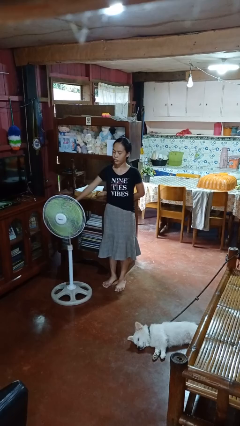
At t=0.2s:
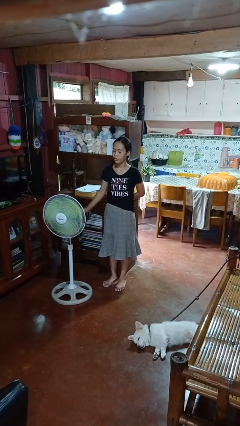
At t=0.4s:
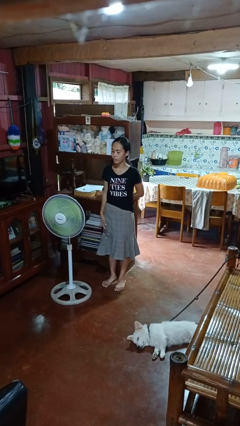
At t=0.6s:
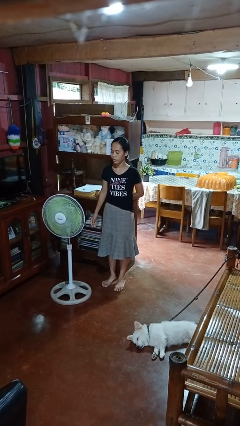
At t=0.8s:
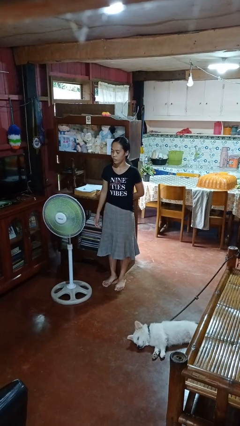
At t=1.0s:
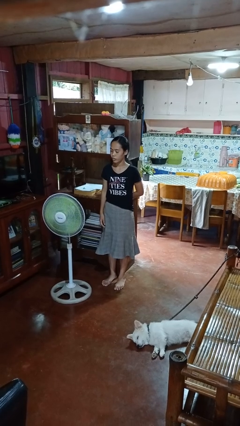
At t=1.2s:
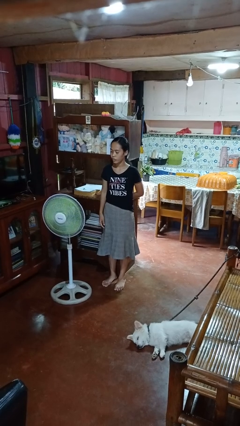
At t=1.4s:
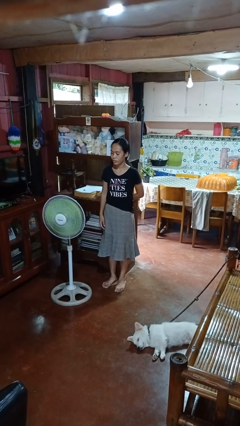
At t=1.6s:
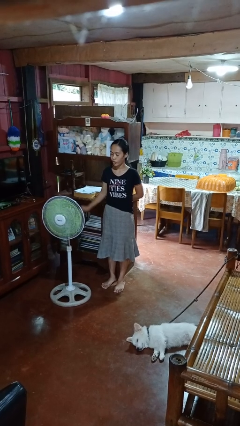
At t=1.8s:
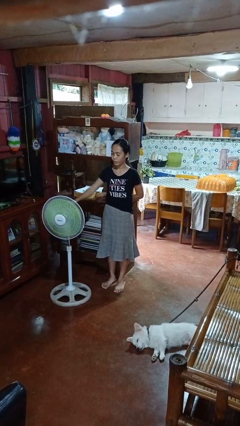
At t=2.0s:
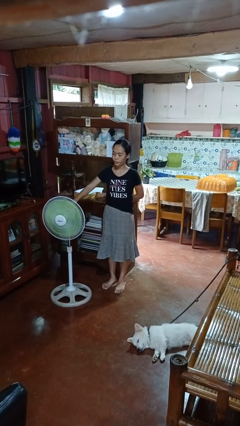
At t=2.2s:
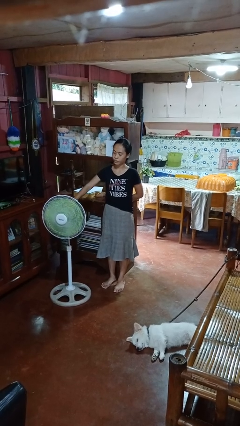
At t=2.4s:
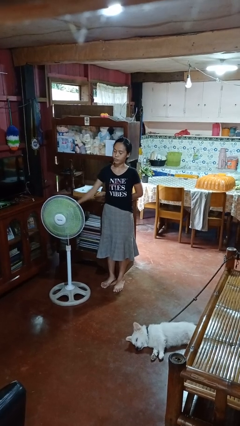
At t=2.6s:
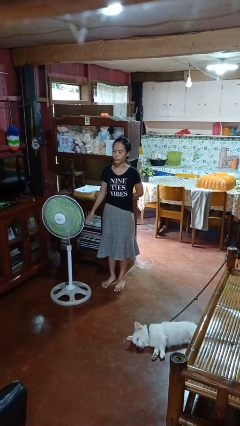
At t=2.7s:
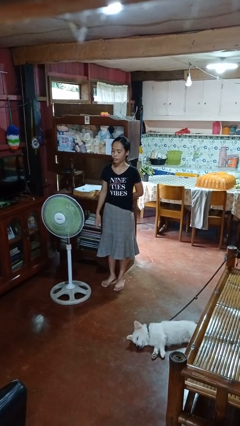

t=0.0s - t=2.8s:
person turns on fan

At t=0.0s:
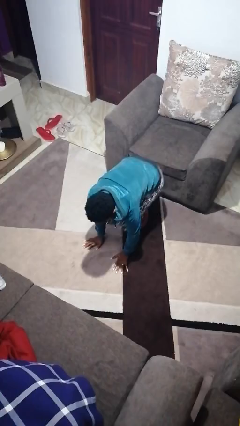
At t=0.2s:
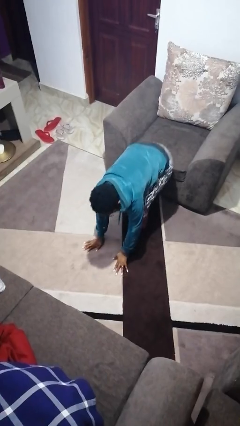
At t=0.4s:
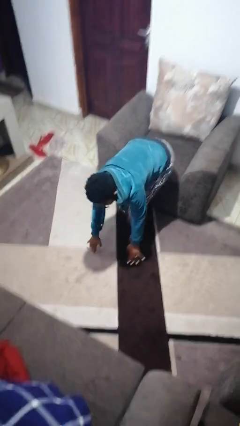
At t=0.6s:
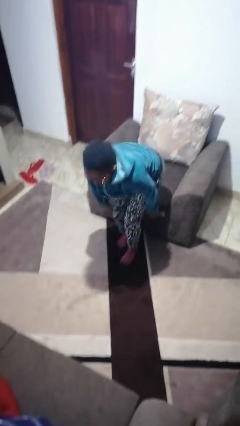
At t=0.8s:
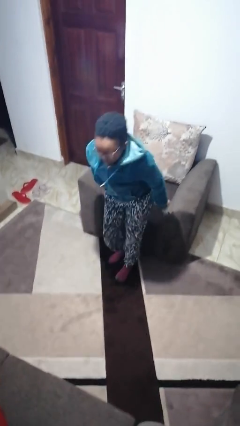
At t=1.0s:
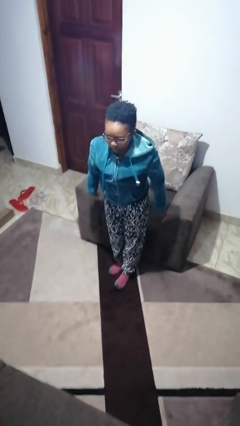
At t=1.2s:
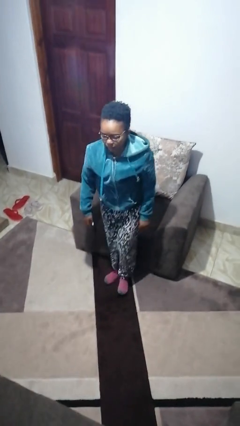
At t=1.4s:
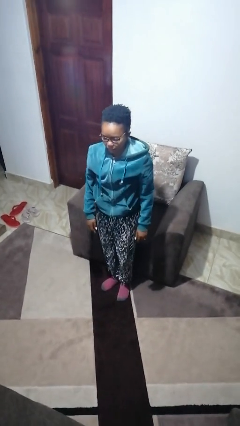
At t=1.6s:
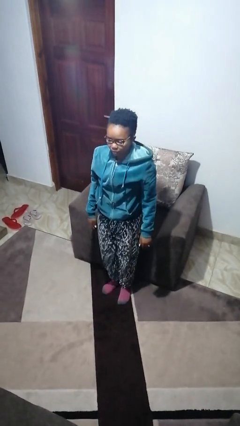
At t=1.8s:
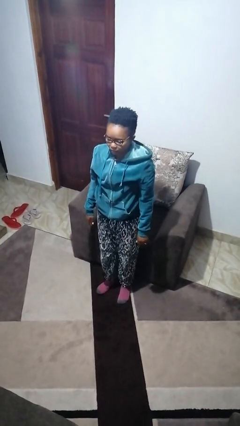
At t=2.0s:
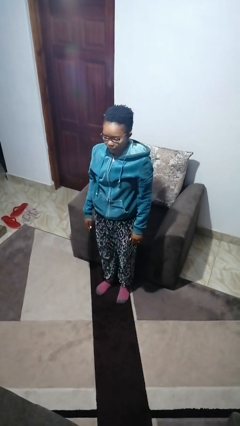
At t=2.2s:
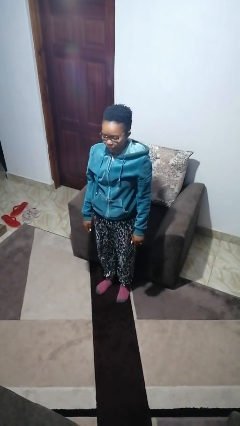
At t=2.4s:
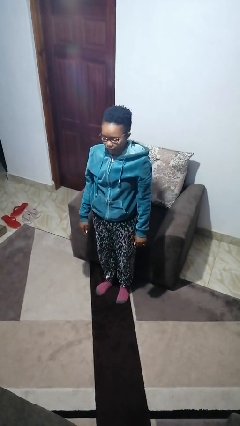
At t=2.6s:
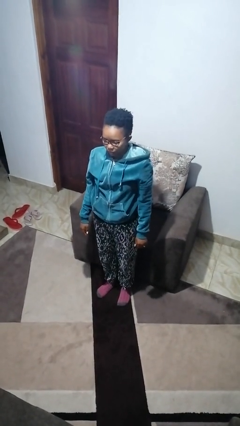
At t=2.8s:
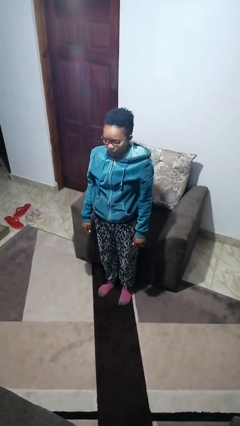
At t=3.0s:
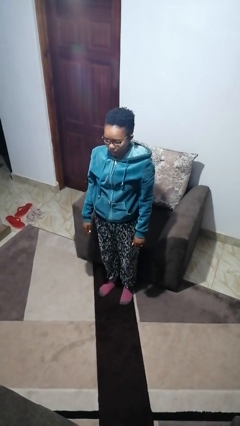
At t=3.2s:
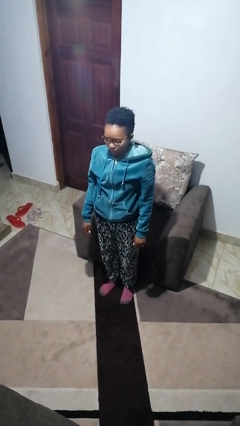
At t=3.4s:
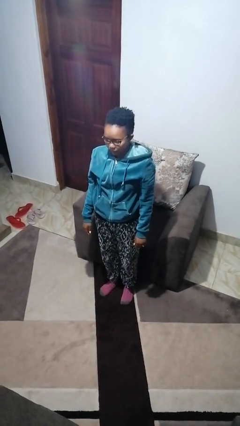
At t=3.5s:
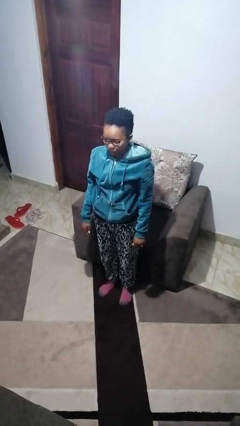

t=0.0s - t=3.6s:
person stands up from floor

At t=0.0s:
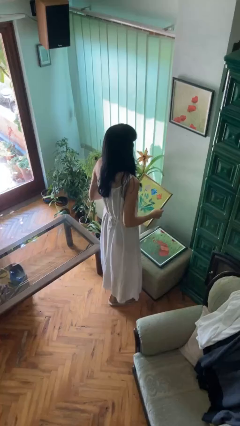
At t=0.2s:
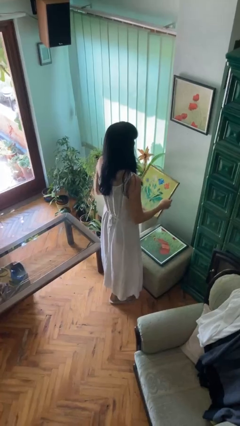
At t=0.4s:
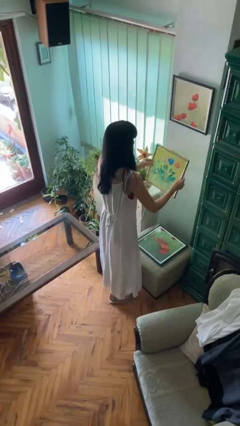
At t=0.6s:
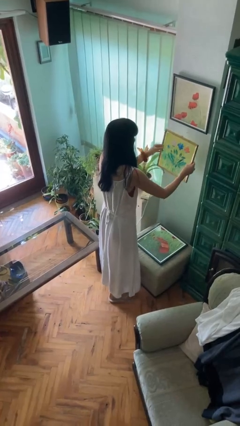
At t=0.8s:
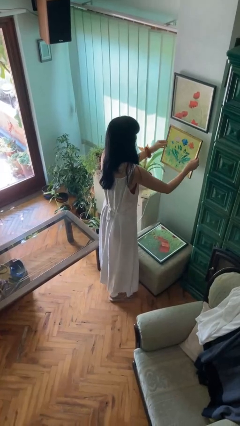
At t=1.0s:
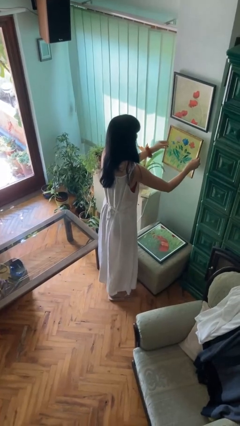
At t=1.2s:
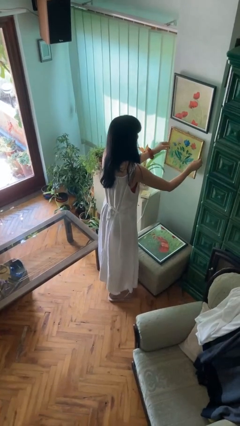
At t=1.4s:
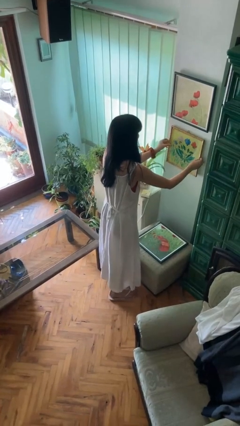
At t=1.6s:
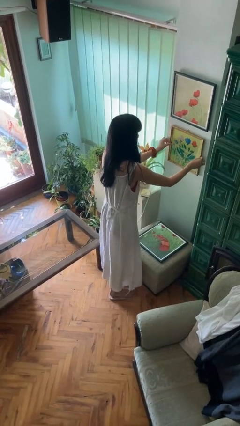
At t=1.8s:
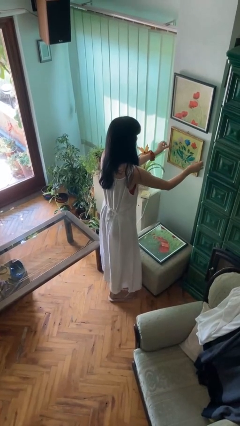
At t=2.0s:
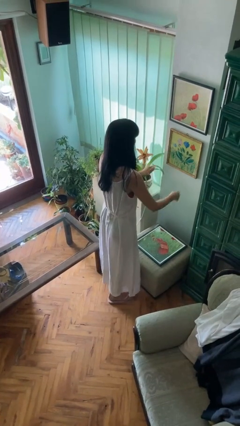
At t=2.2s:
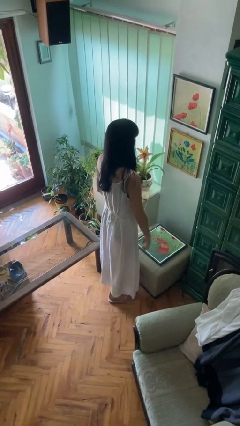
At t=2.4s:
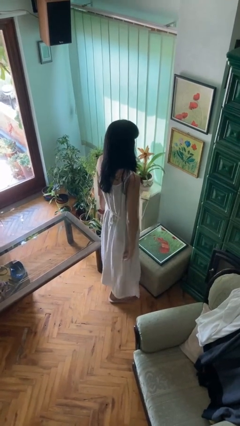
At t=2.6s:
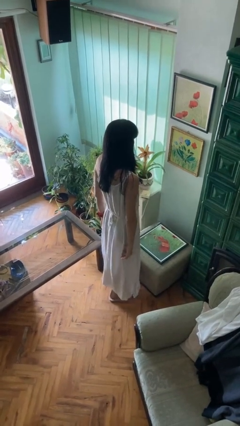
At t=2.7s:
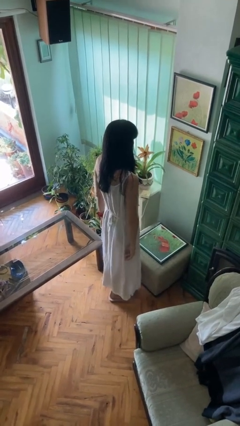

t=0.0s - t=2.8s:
person puts up picture frame

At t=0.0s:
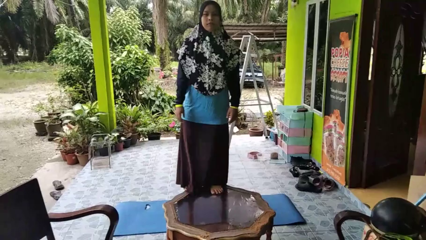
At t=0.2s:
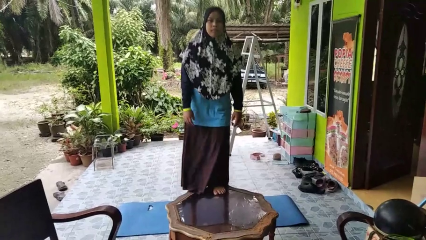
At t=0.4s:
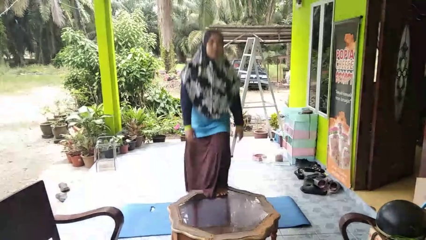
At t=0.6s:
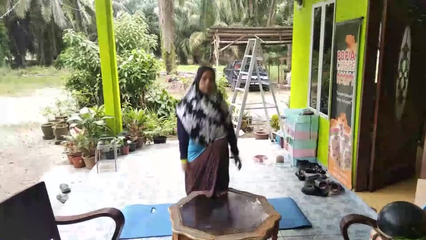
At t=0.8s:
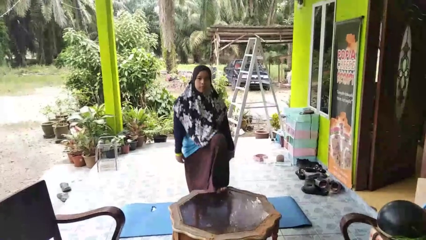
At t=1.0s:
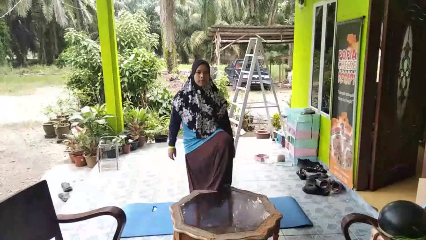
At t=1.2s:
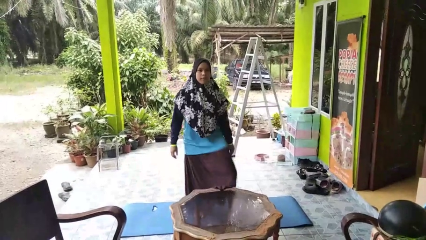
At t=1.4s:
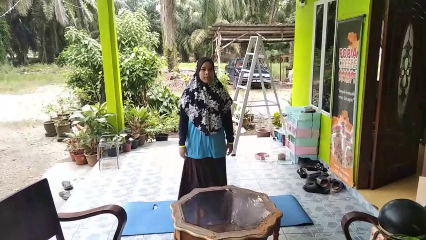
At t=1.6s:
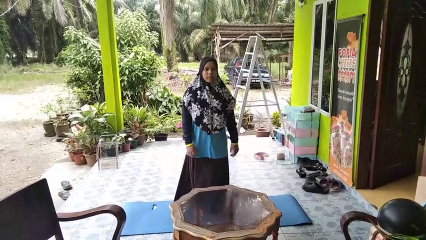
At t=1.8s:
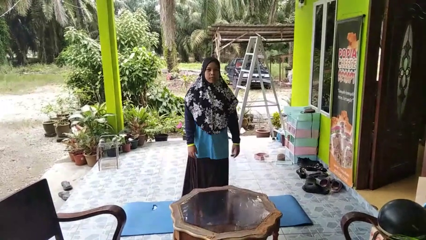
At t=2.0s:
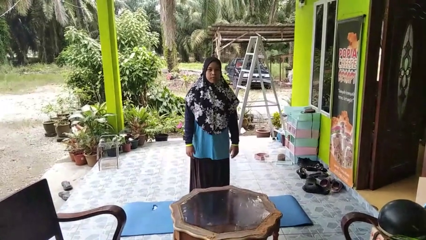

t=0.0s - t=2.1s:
person climbs off table

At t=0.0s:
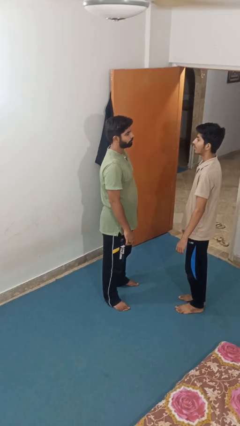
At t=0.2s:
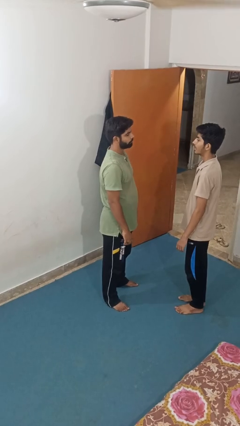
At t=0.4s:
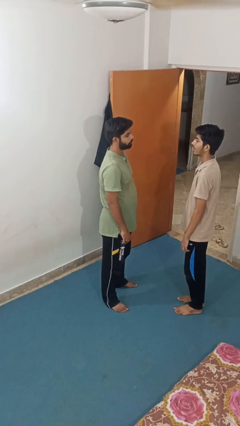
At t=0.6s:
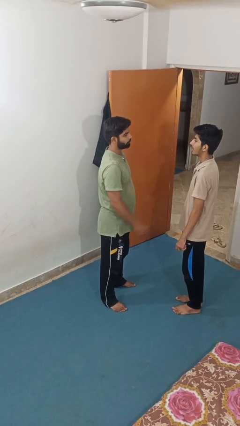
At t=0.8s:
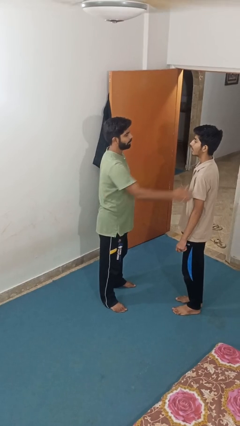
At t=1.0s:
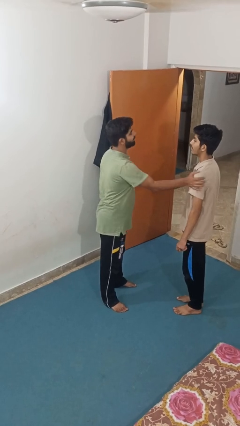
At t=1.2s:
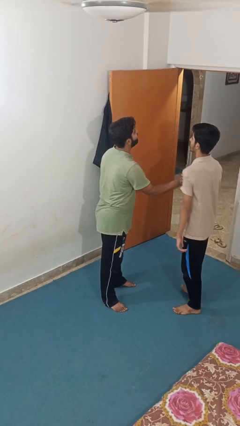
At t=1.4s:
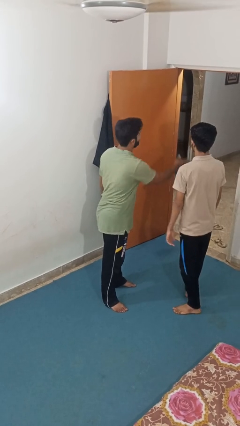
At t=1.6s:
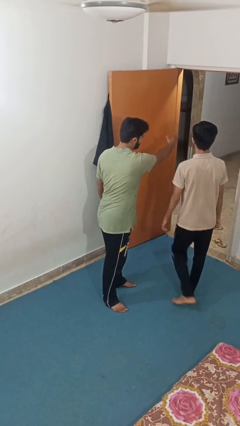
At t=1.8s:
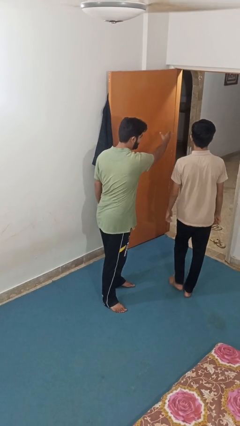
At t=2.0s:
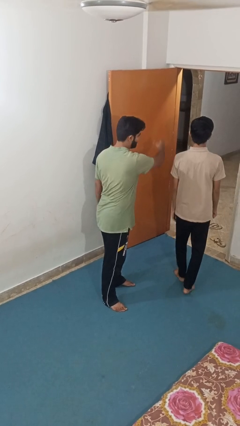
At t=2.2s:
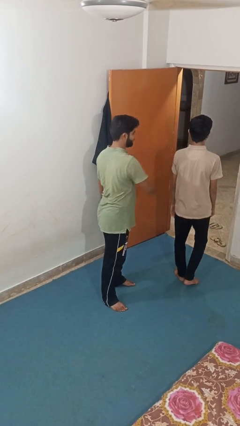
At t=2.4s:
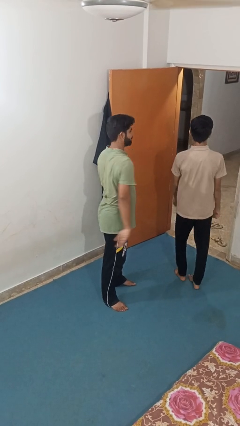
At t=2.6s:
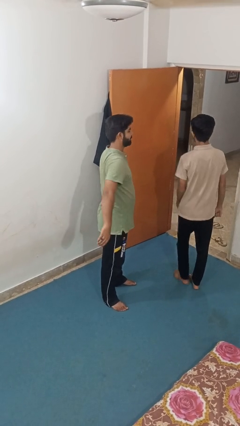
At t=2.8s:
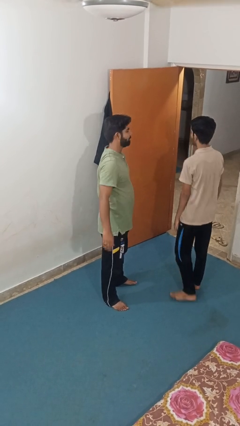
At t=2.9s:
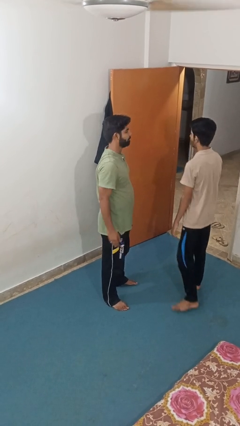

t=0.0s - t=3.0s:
person shoves person

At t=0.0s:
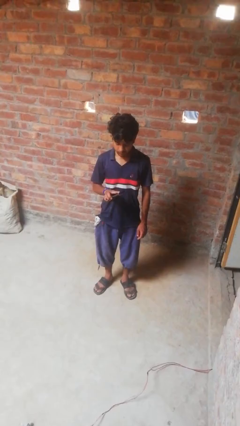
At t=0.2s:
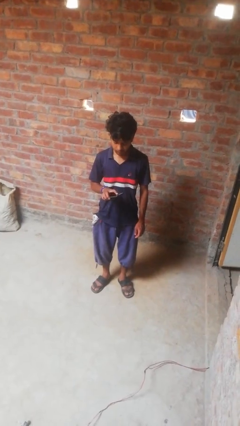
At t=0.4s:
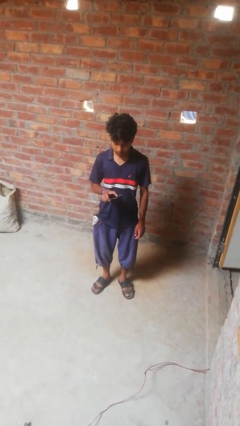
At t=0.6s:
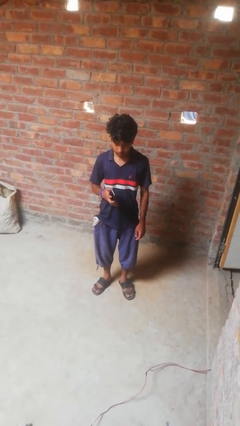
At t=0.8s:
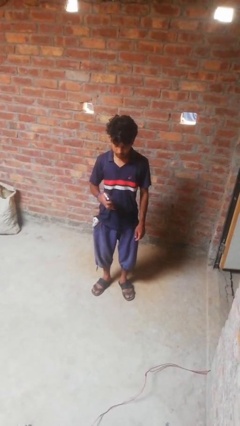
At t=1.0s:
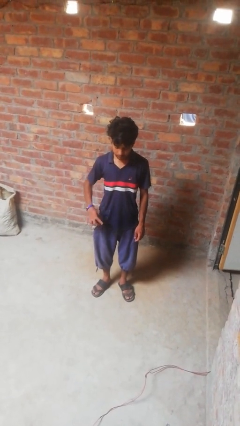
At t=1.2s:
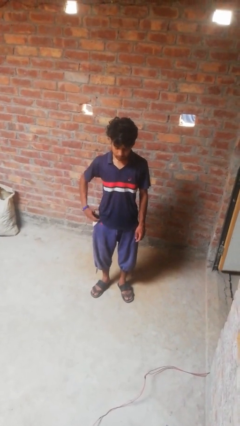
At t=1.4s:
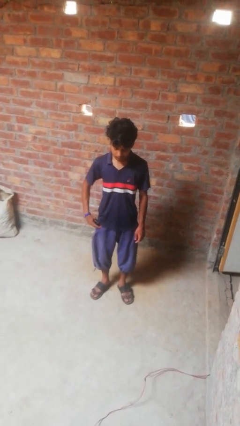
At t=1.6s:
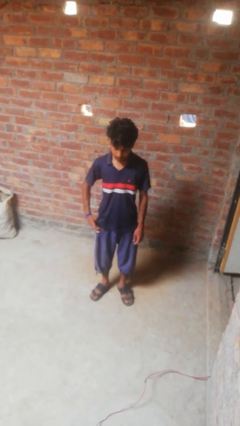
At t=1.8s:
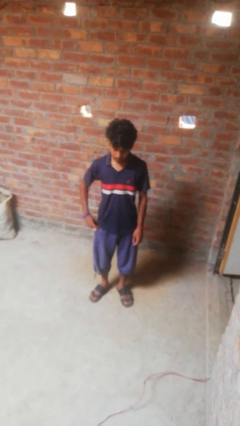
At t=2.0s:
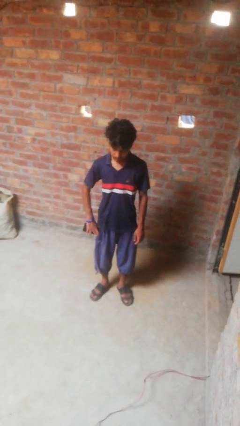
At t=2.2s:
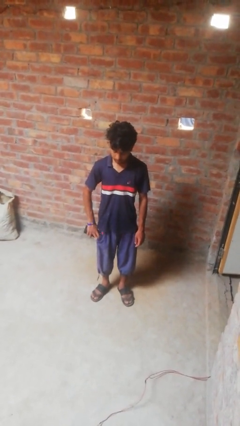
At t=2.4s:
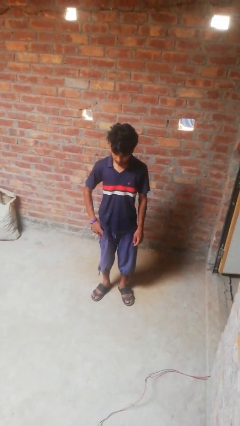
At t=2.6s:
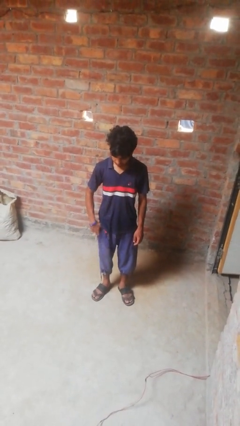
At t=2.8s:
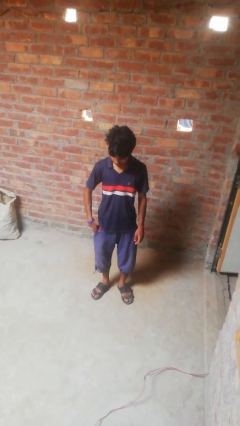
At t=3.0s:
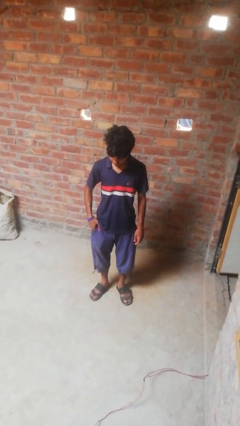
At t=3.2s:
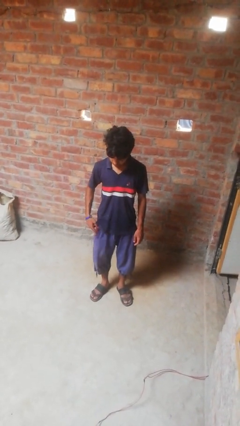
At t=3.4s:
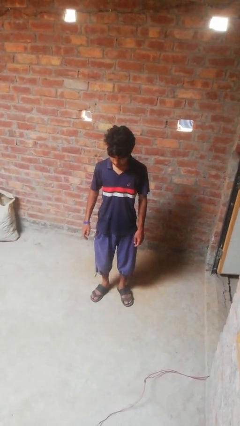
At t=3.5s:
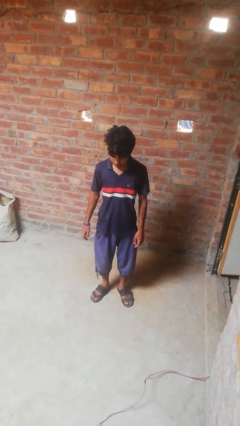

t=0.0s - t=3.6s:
person puts phone into pocket
